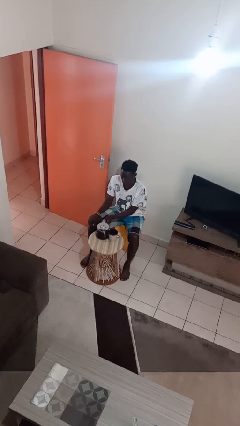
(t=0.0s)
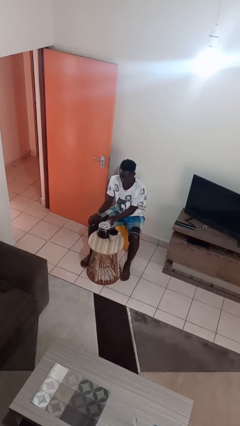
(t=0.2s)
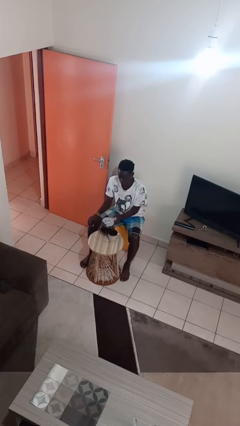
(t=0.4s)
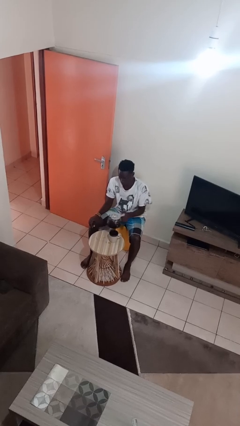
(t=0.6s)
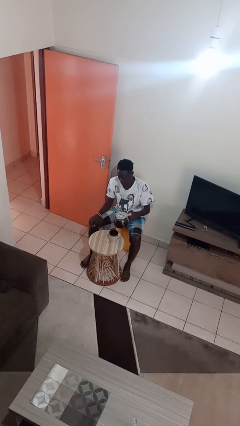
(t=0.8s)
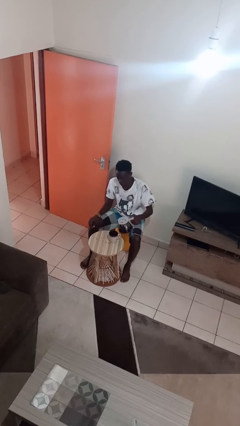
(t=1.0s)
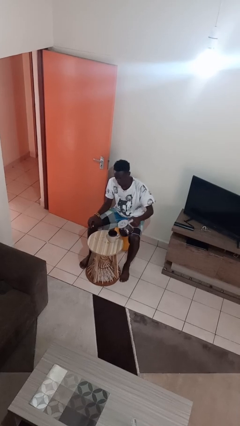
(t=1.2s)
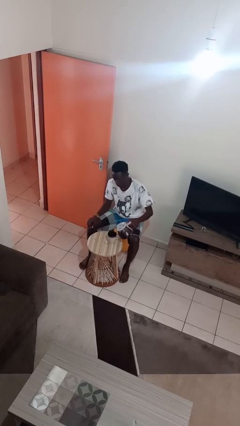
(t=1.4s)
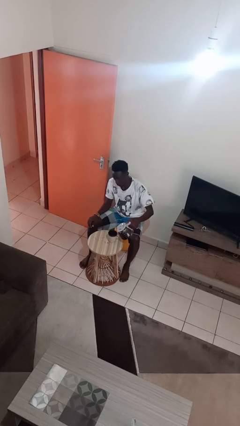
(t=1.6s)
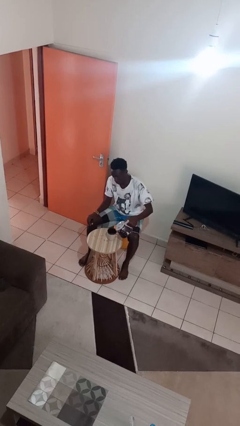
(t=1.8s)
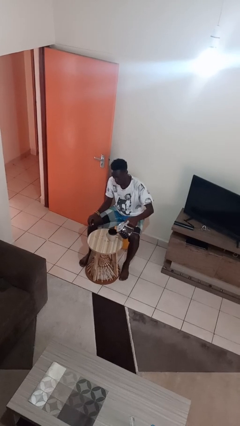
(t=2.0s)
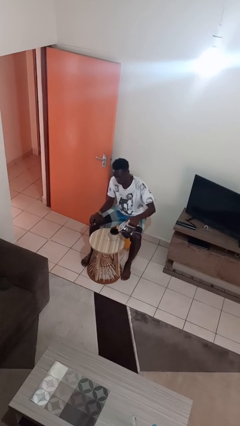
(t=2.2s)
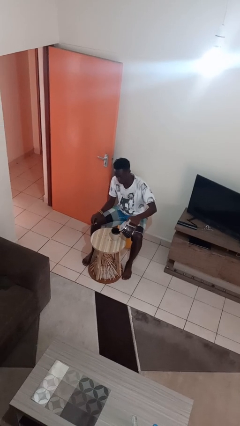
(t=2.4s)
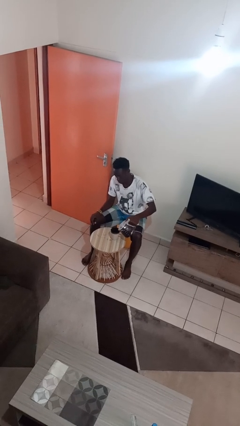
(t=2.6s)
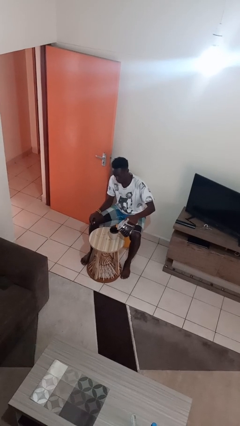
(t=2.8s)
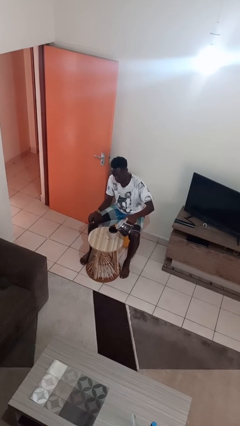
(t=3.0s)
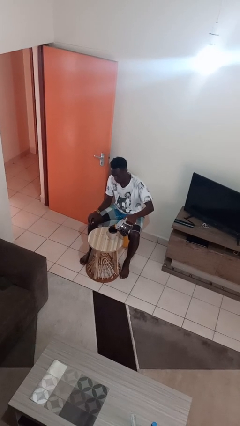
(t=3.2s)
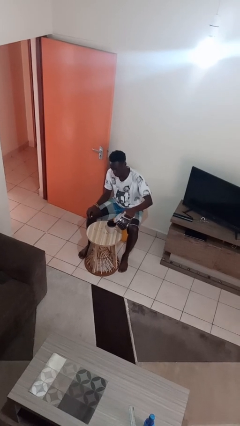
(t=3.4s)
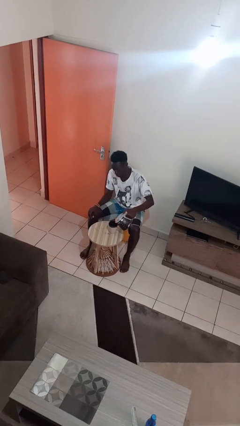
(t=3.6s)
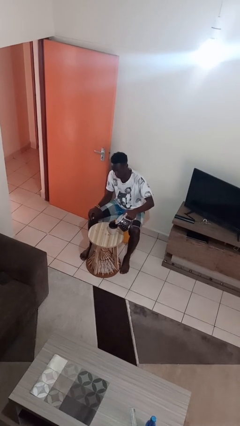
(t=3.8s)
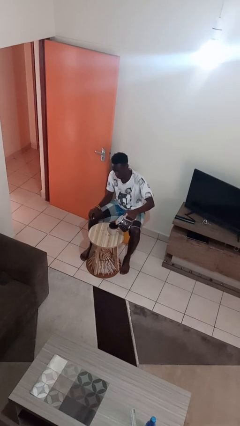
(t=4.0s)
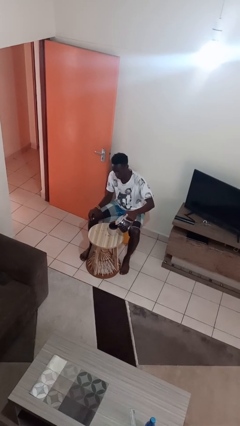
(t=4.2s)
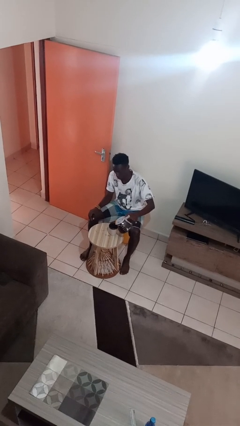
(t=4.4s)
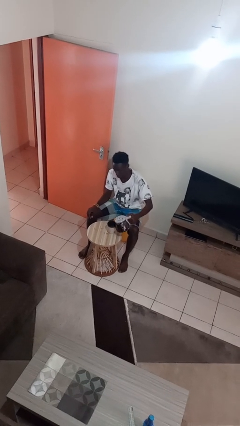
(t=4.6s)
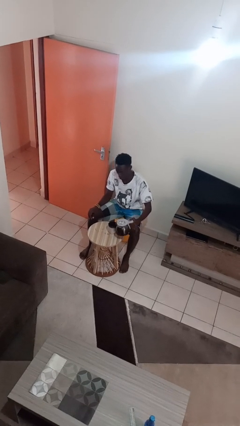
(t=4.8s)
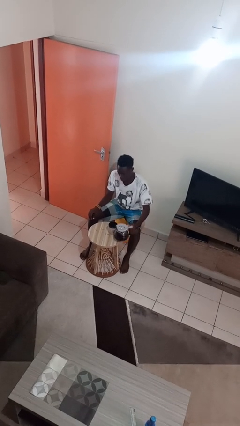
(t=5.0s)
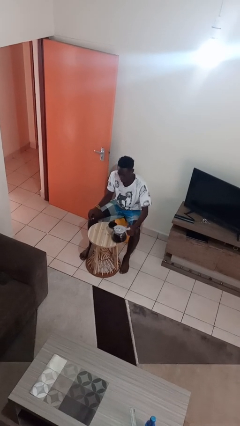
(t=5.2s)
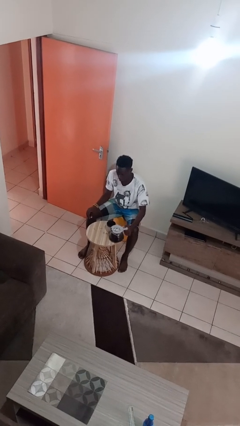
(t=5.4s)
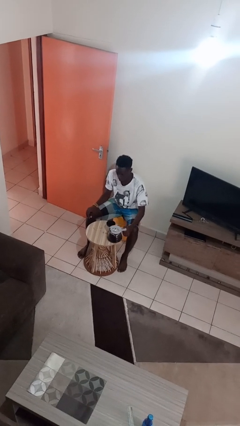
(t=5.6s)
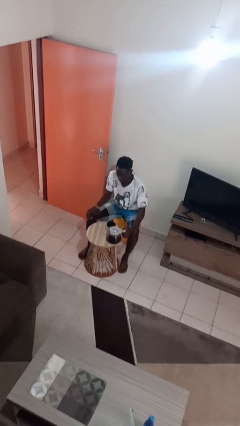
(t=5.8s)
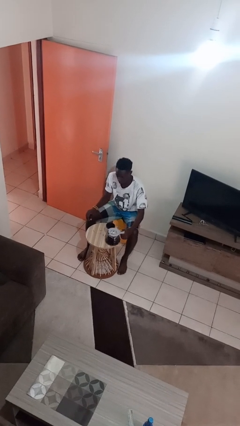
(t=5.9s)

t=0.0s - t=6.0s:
person pours coffee into mug

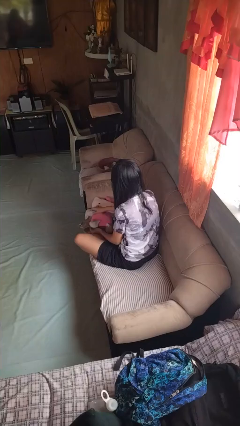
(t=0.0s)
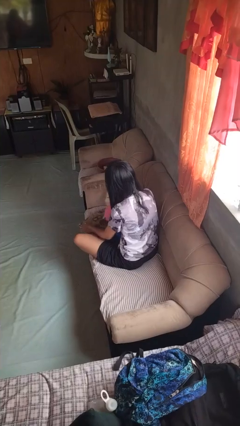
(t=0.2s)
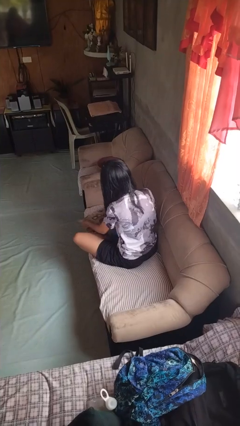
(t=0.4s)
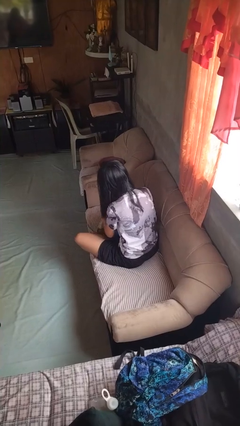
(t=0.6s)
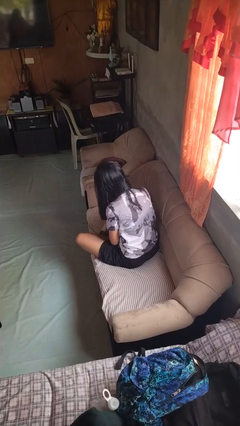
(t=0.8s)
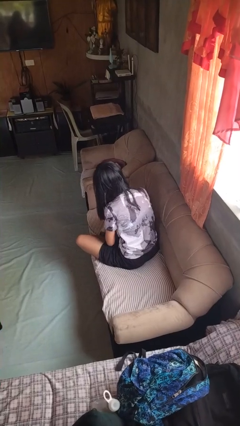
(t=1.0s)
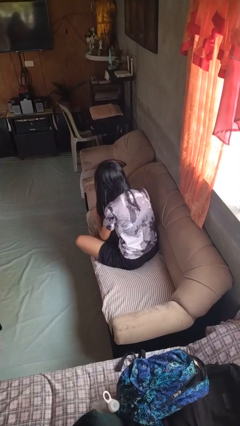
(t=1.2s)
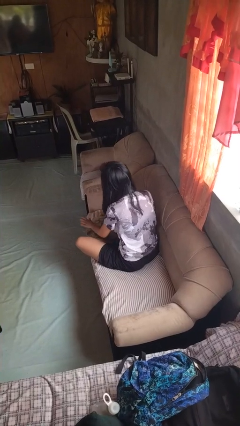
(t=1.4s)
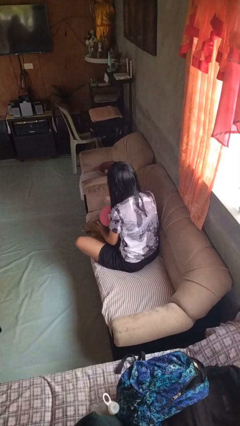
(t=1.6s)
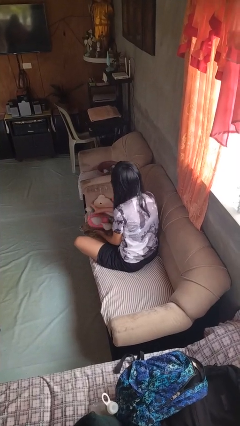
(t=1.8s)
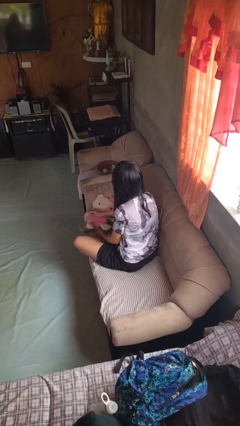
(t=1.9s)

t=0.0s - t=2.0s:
person searches in couch

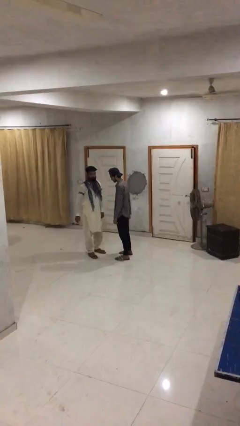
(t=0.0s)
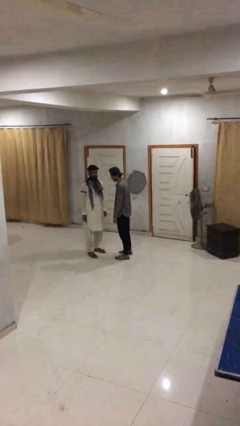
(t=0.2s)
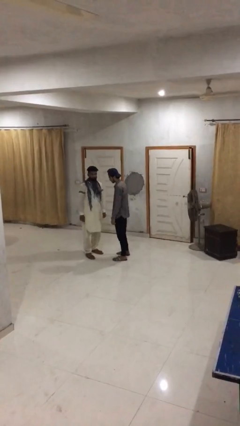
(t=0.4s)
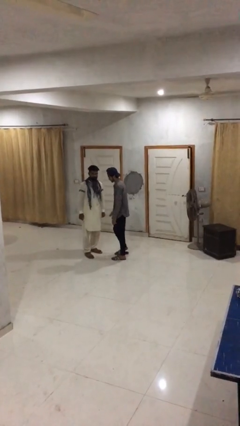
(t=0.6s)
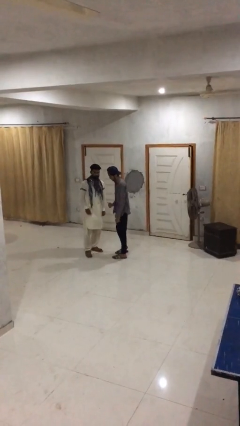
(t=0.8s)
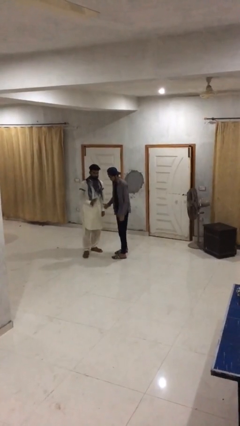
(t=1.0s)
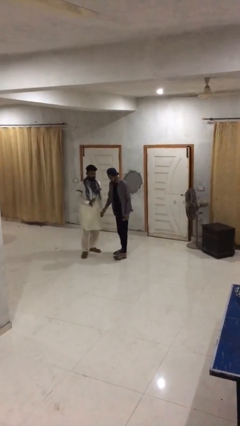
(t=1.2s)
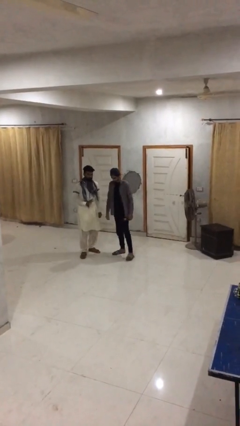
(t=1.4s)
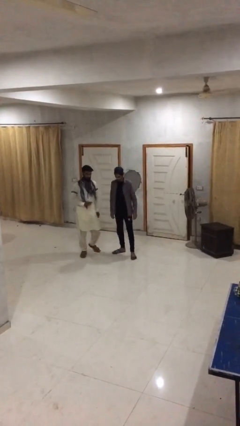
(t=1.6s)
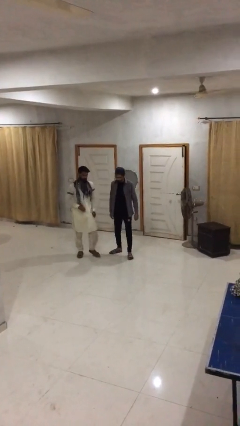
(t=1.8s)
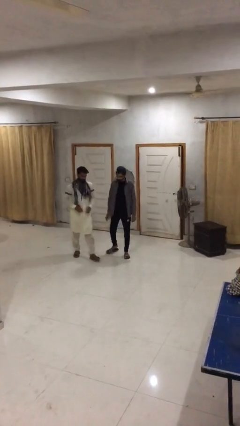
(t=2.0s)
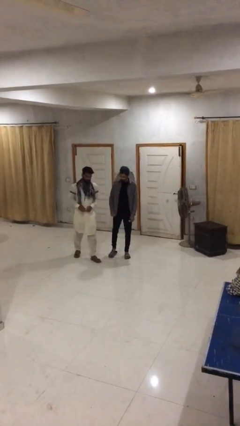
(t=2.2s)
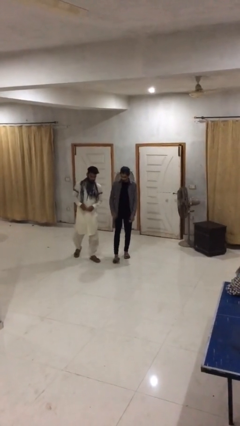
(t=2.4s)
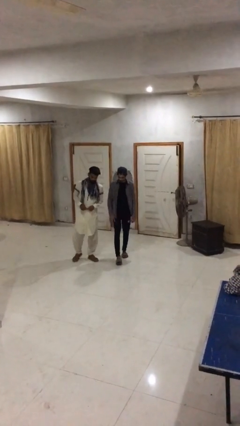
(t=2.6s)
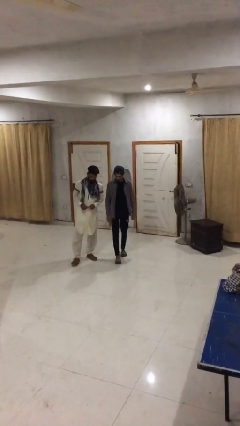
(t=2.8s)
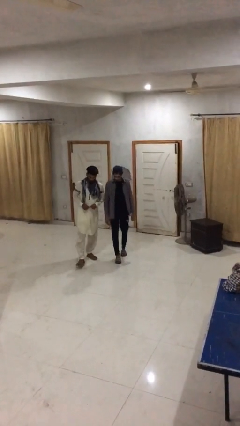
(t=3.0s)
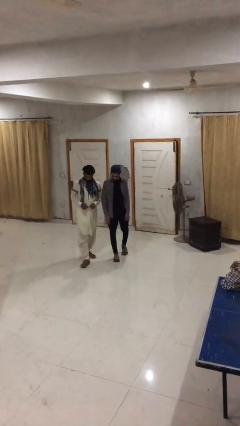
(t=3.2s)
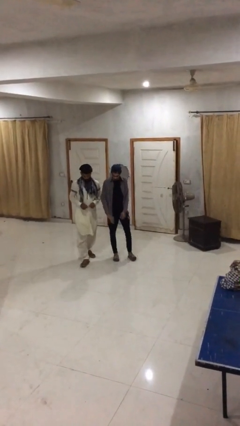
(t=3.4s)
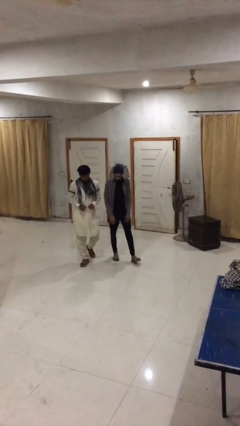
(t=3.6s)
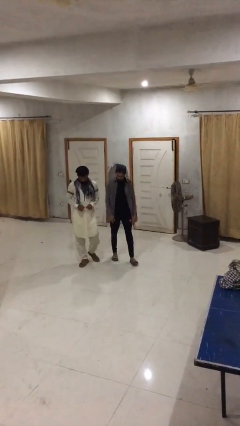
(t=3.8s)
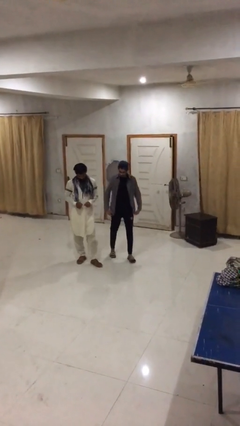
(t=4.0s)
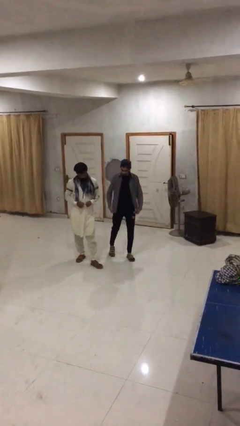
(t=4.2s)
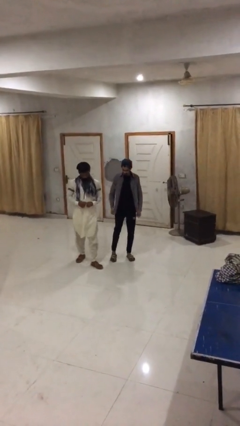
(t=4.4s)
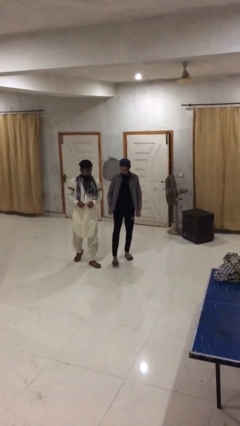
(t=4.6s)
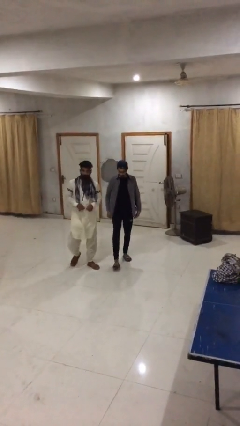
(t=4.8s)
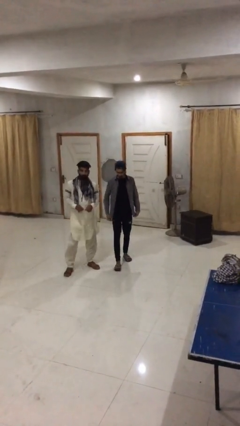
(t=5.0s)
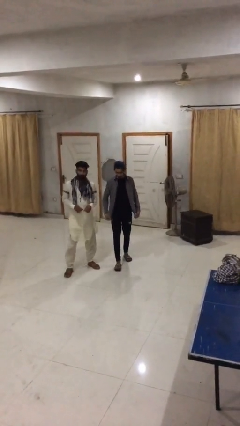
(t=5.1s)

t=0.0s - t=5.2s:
person talks to person

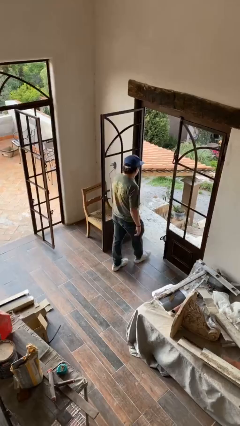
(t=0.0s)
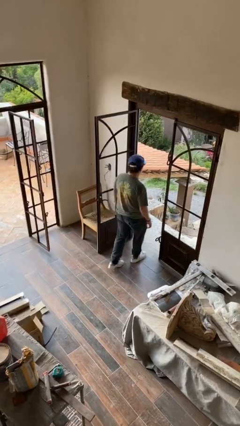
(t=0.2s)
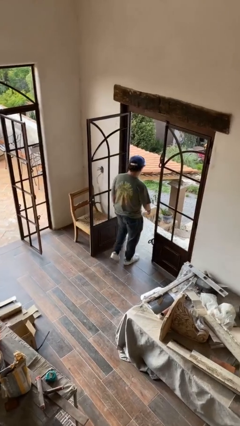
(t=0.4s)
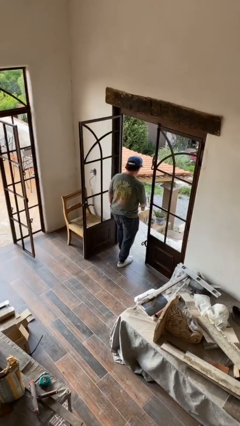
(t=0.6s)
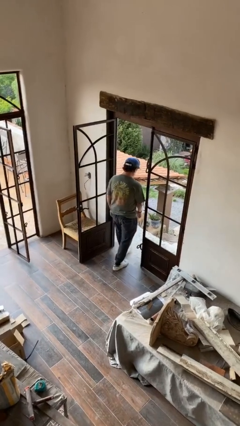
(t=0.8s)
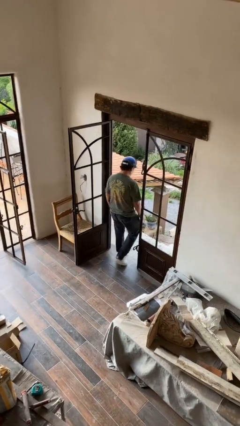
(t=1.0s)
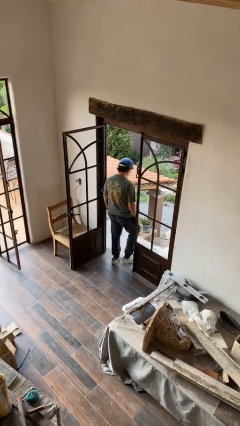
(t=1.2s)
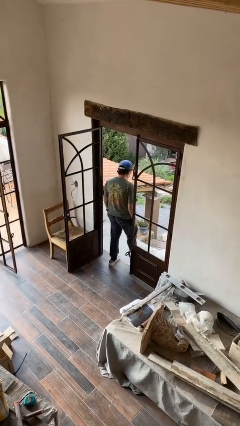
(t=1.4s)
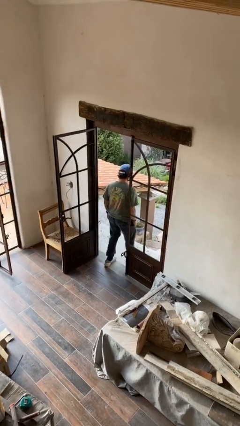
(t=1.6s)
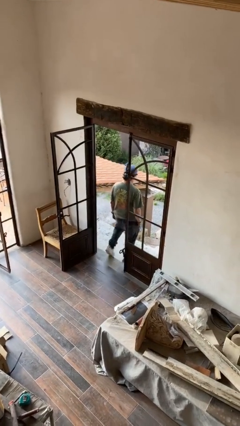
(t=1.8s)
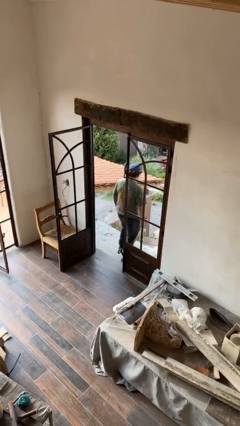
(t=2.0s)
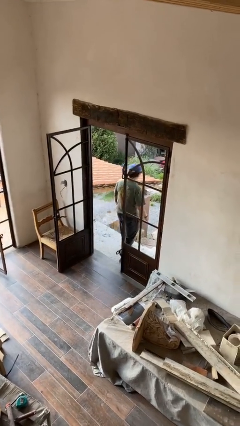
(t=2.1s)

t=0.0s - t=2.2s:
person exits scene through structure

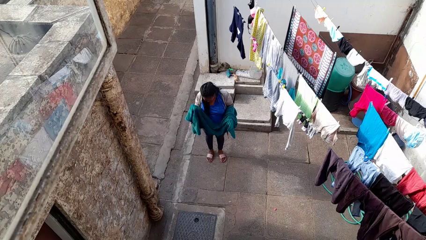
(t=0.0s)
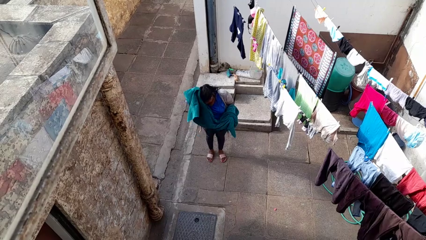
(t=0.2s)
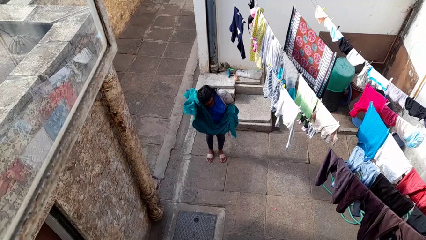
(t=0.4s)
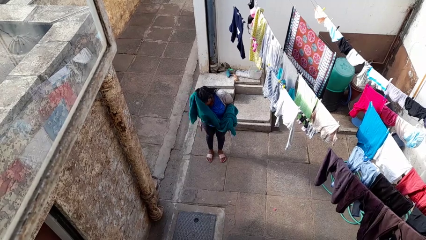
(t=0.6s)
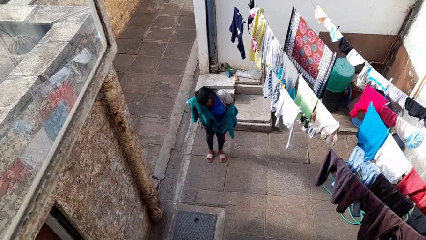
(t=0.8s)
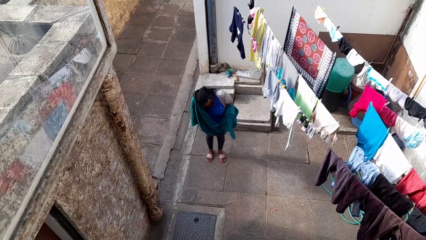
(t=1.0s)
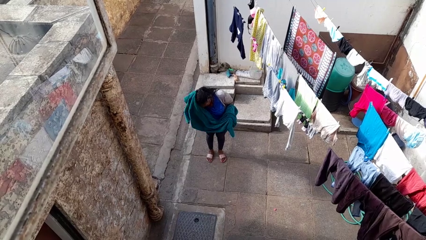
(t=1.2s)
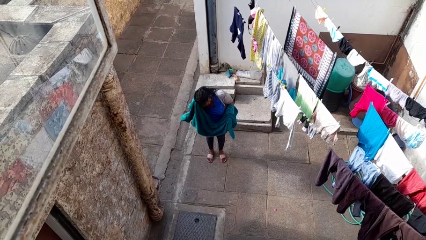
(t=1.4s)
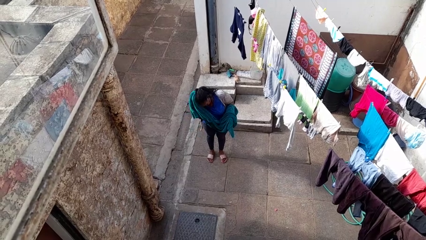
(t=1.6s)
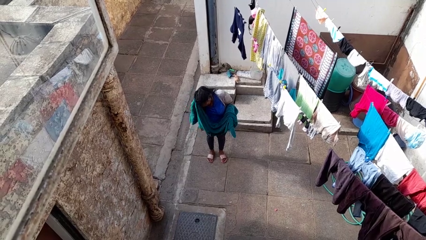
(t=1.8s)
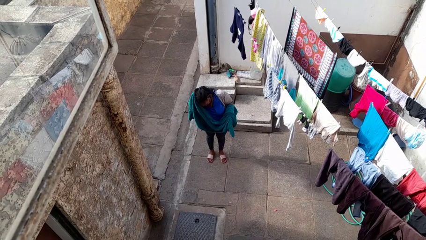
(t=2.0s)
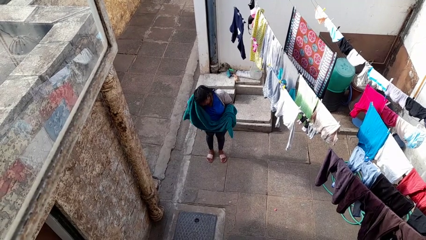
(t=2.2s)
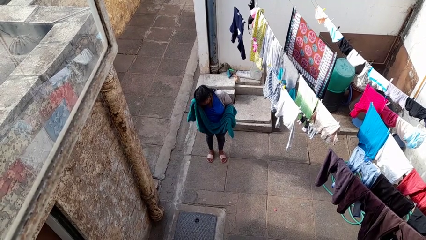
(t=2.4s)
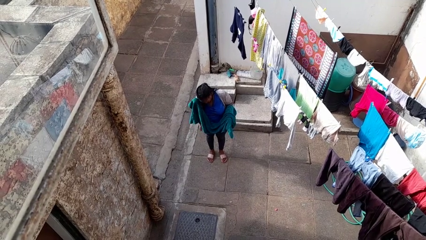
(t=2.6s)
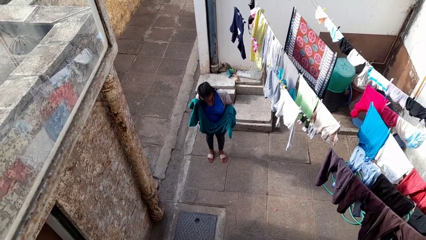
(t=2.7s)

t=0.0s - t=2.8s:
person dries hair with towel
